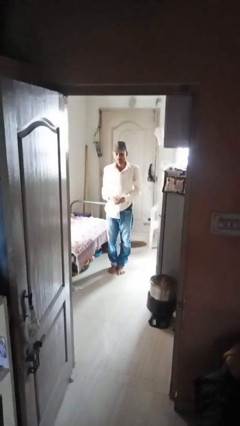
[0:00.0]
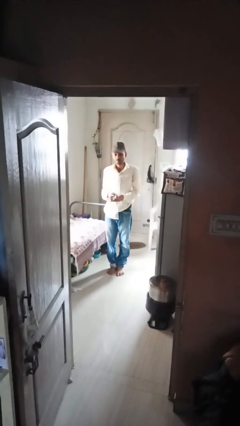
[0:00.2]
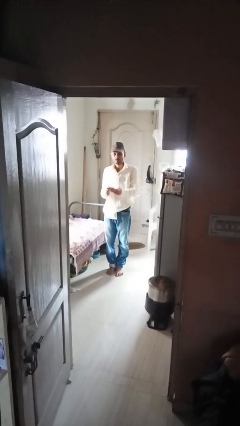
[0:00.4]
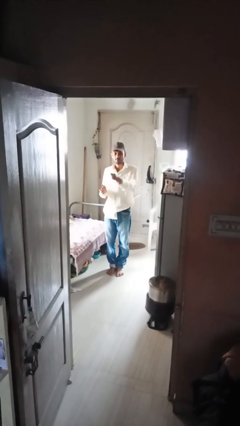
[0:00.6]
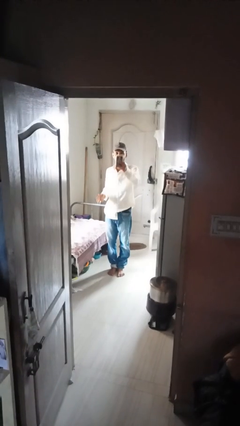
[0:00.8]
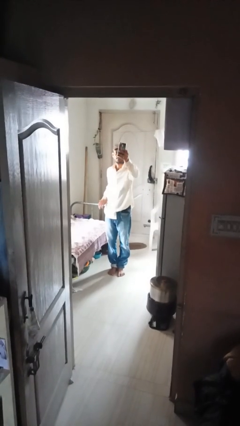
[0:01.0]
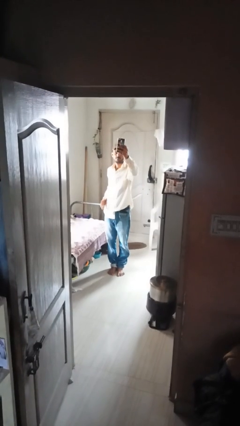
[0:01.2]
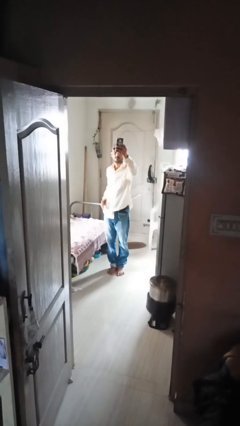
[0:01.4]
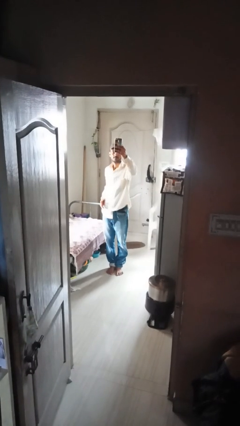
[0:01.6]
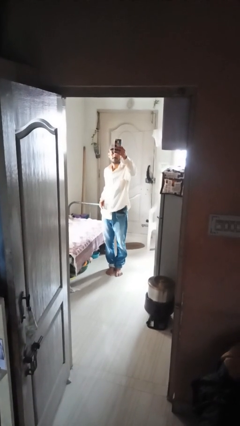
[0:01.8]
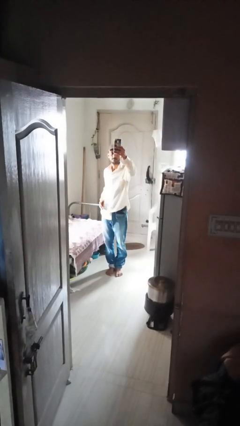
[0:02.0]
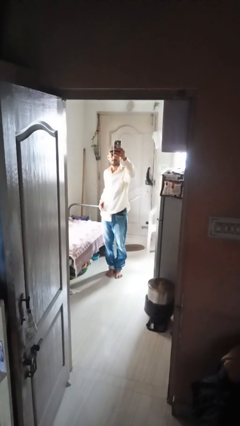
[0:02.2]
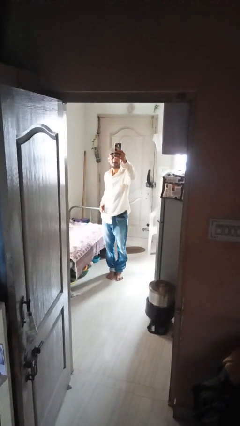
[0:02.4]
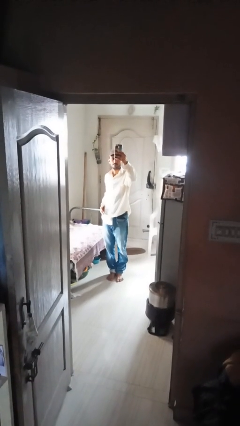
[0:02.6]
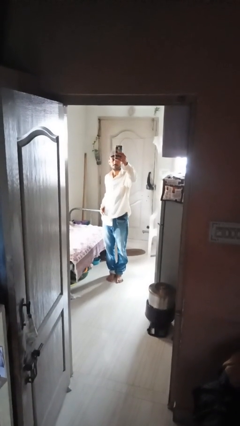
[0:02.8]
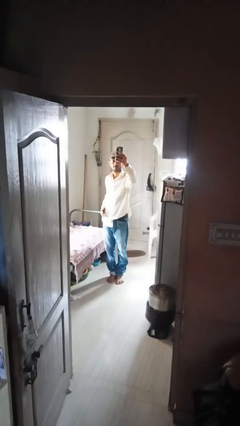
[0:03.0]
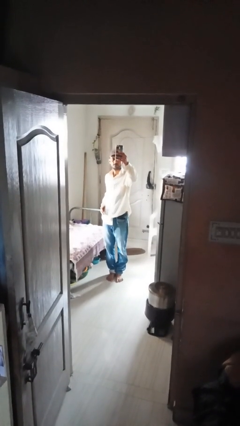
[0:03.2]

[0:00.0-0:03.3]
person takes selfie

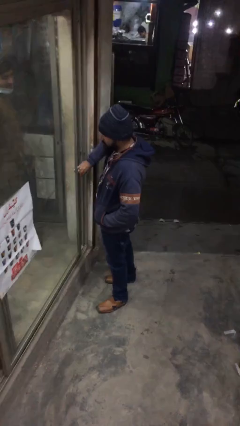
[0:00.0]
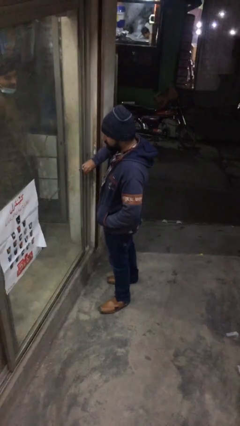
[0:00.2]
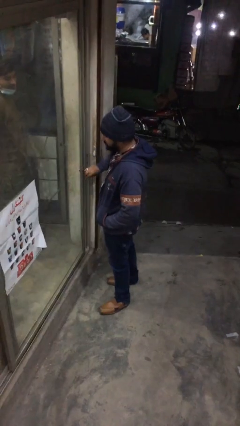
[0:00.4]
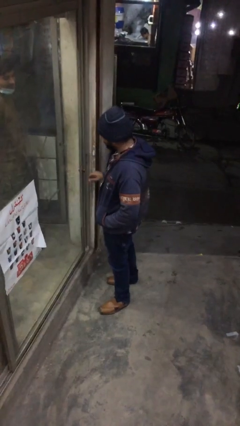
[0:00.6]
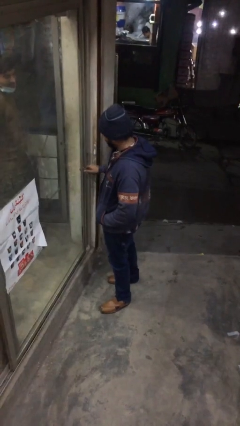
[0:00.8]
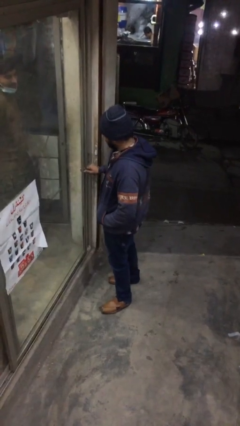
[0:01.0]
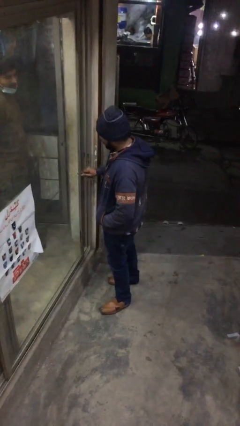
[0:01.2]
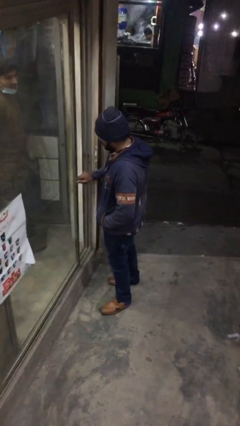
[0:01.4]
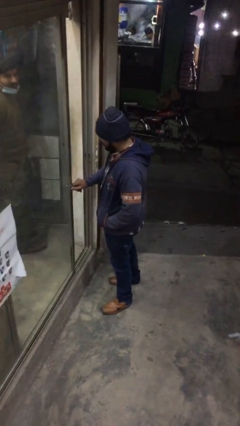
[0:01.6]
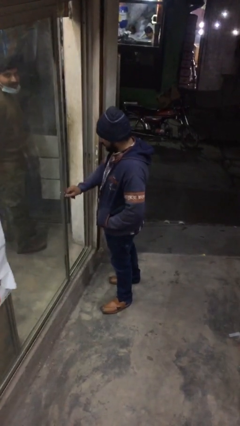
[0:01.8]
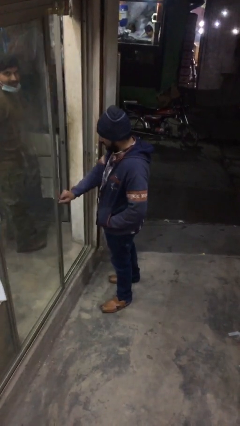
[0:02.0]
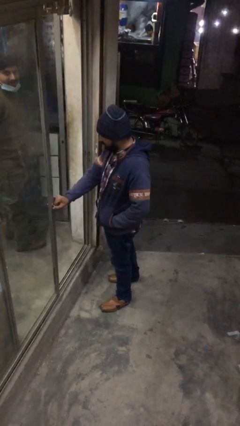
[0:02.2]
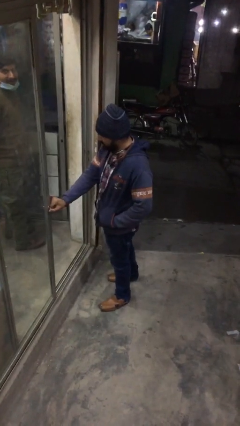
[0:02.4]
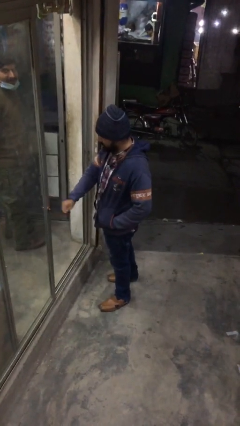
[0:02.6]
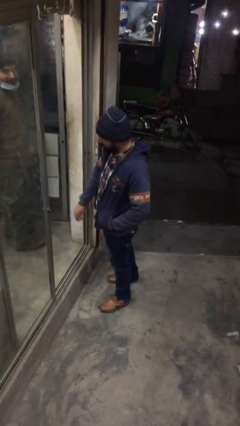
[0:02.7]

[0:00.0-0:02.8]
person opens facility door

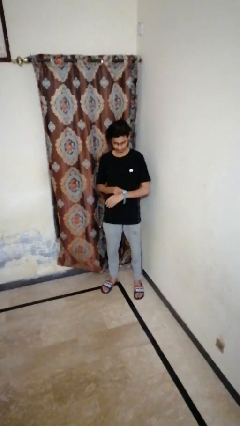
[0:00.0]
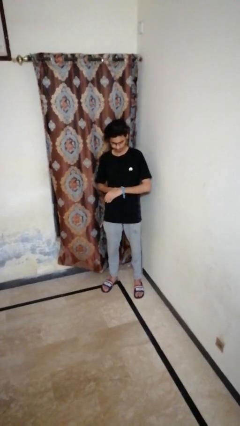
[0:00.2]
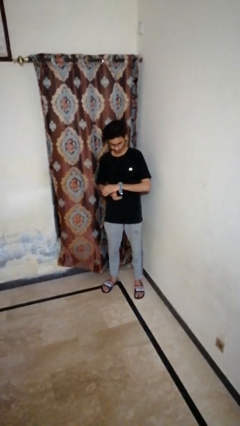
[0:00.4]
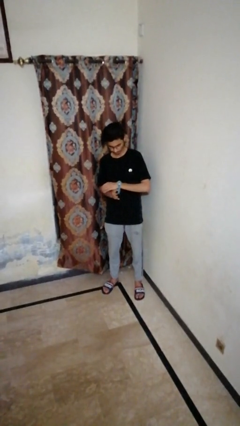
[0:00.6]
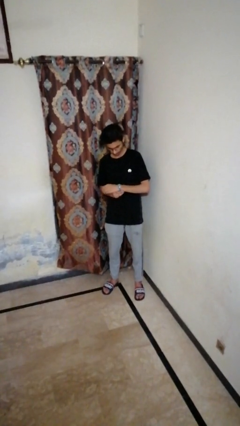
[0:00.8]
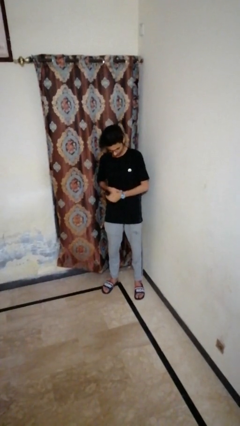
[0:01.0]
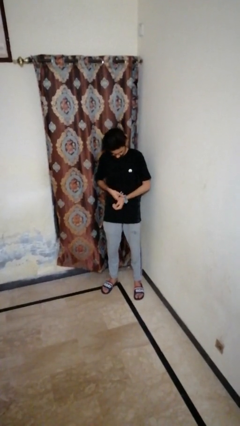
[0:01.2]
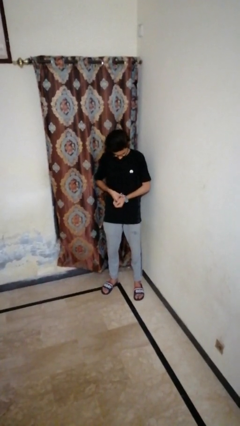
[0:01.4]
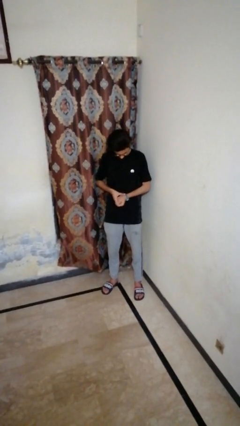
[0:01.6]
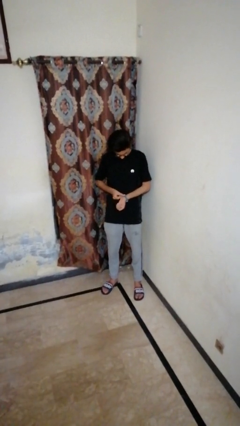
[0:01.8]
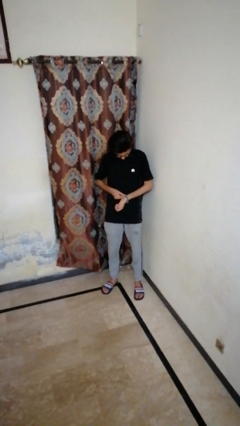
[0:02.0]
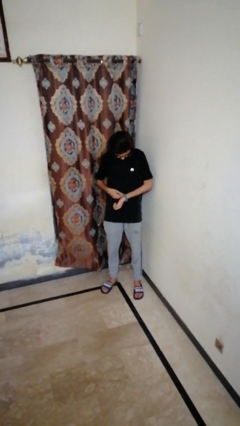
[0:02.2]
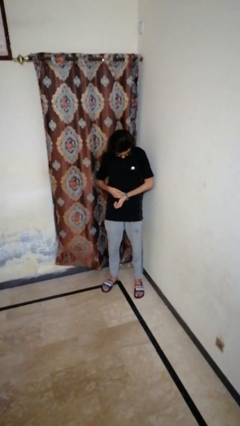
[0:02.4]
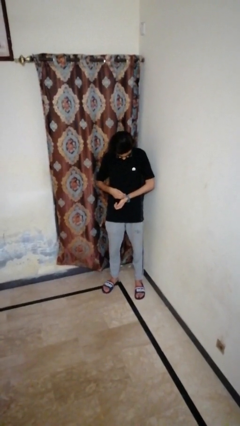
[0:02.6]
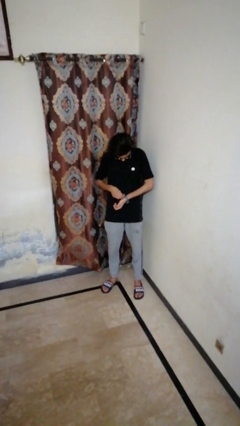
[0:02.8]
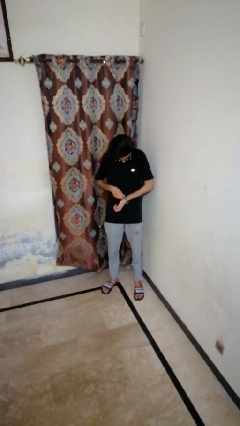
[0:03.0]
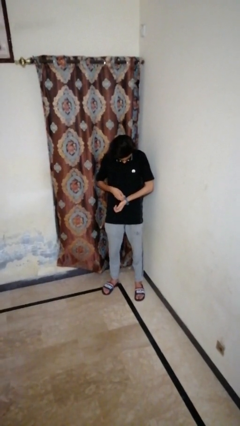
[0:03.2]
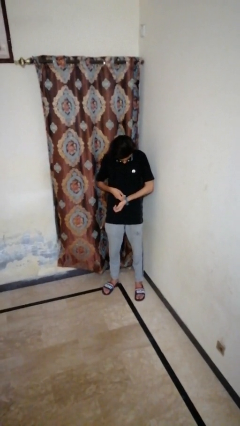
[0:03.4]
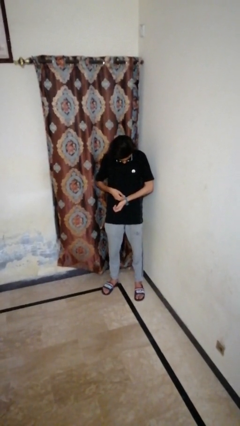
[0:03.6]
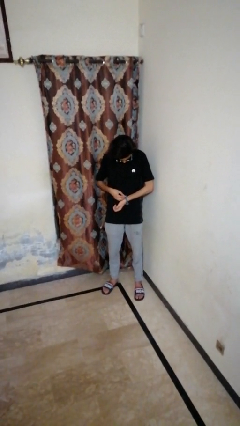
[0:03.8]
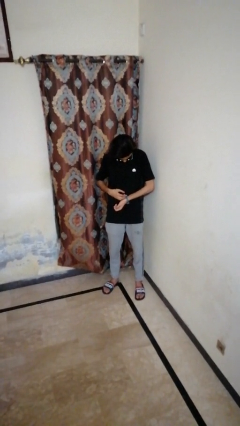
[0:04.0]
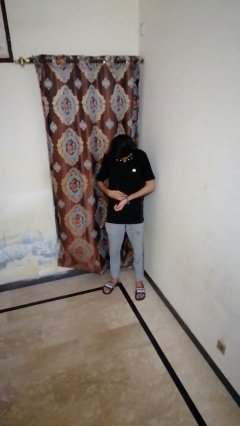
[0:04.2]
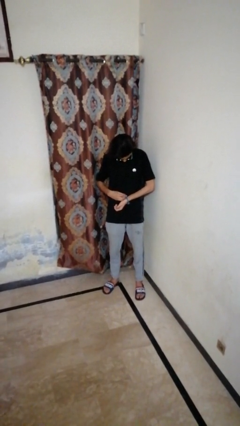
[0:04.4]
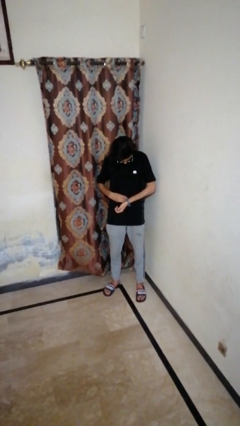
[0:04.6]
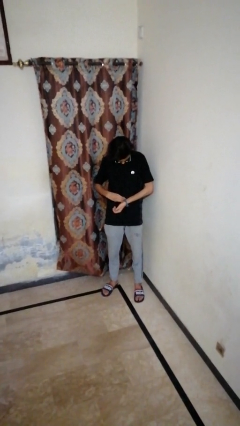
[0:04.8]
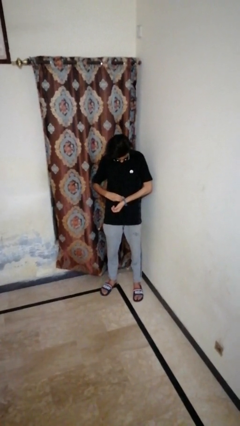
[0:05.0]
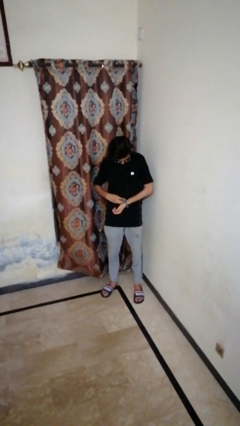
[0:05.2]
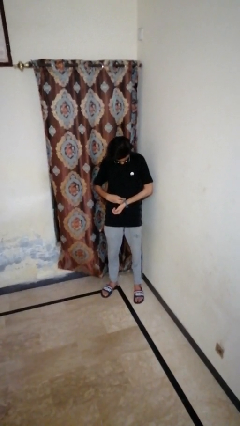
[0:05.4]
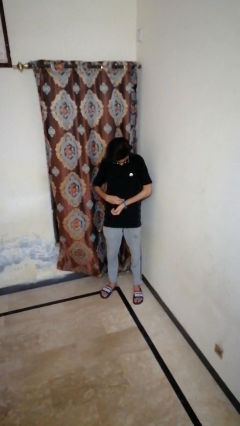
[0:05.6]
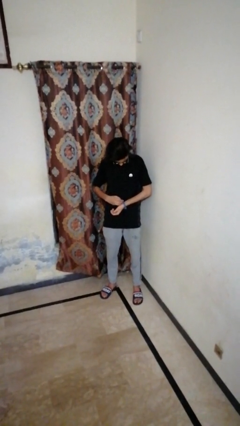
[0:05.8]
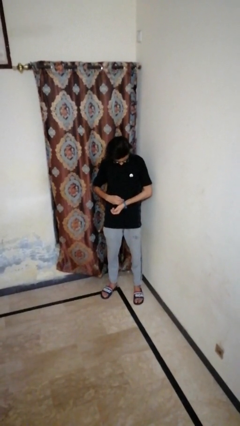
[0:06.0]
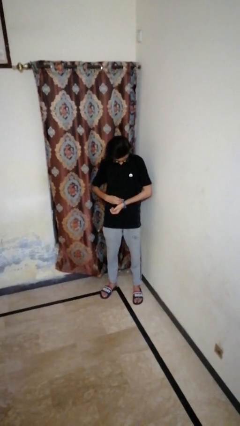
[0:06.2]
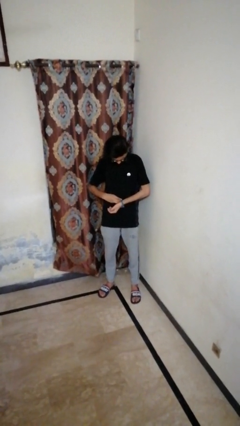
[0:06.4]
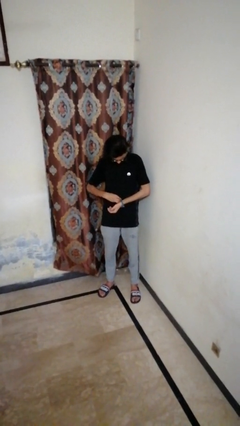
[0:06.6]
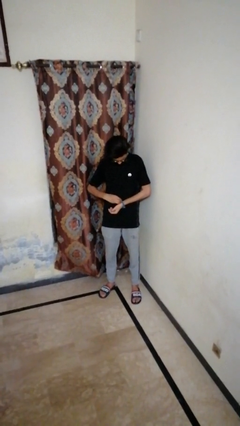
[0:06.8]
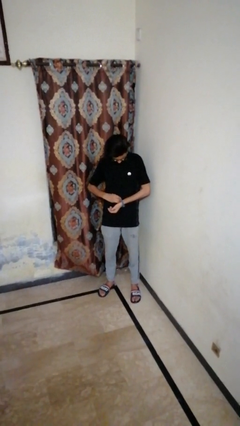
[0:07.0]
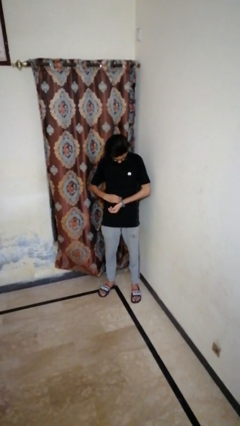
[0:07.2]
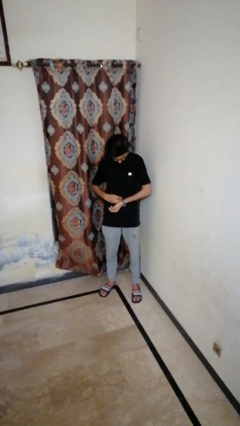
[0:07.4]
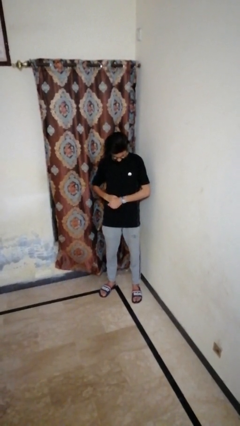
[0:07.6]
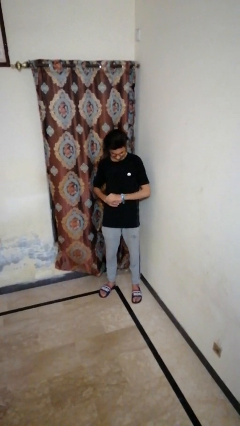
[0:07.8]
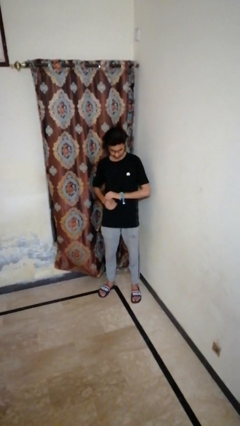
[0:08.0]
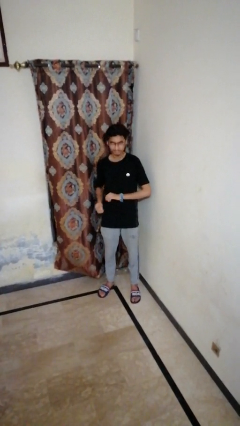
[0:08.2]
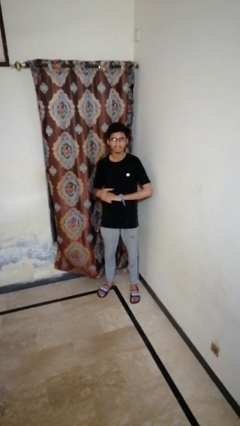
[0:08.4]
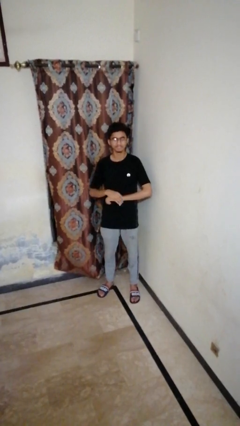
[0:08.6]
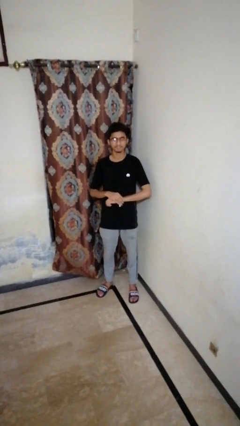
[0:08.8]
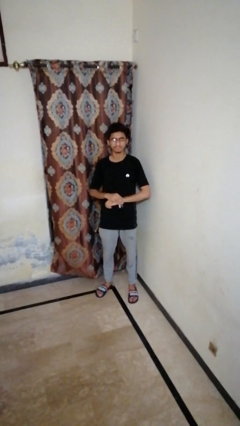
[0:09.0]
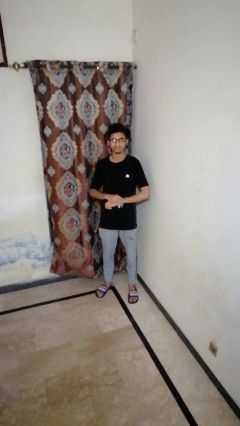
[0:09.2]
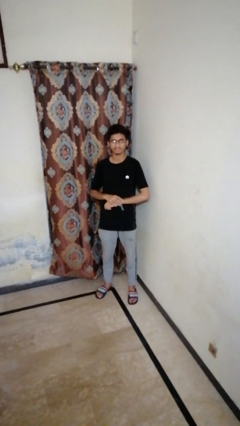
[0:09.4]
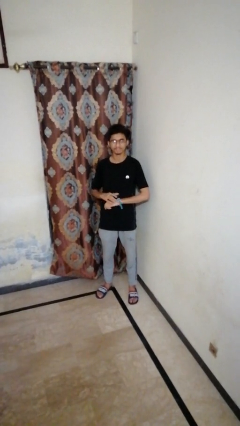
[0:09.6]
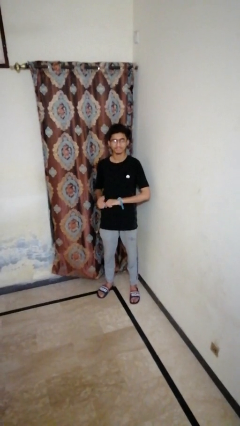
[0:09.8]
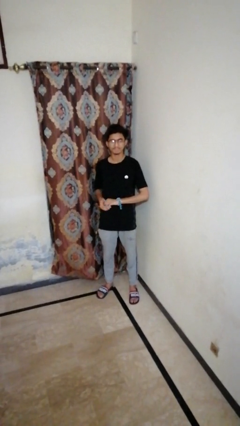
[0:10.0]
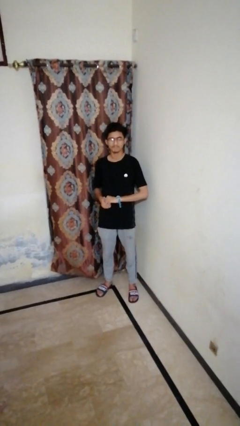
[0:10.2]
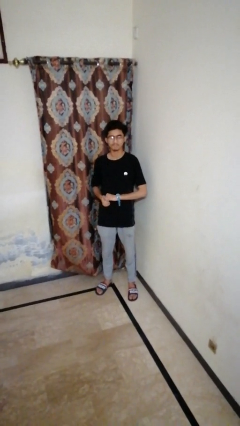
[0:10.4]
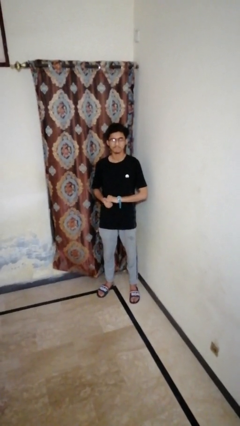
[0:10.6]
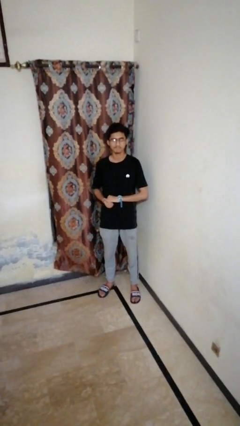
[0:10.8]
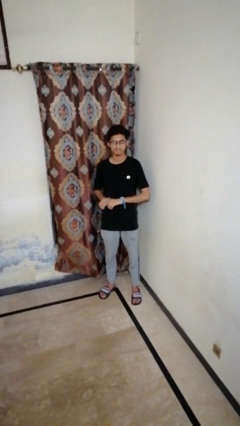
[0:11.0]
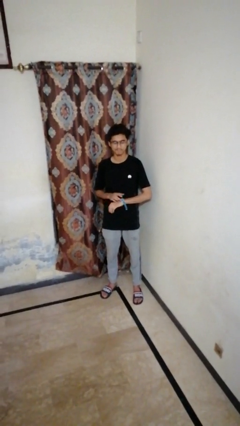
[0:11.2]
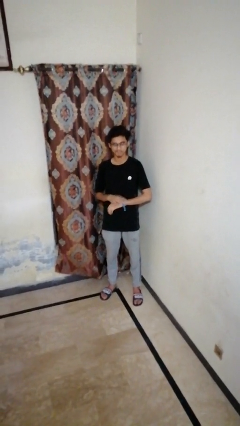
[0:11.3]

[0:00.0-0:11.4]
person puts on wristwatch

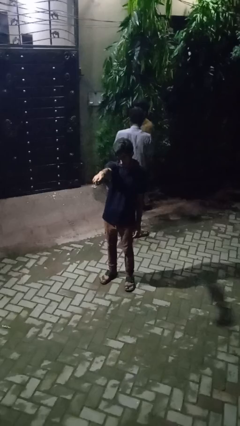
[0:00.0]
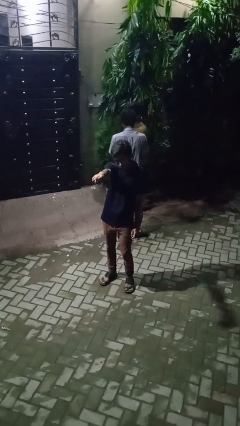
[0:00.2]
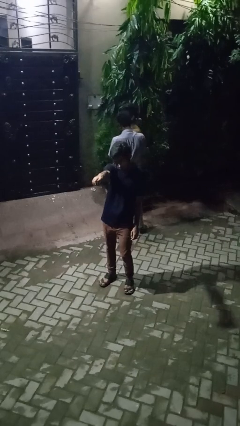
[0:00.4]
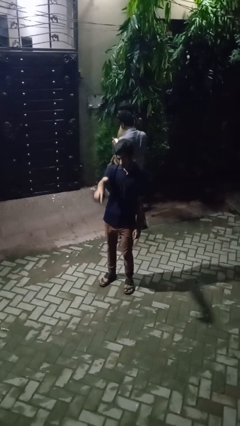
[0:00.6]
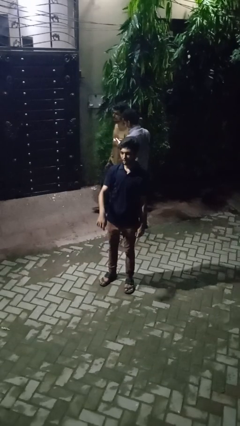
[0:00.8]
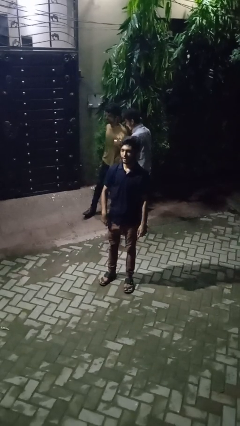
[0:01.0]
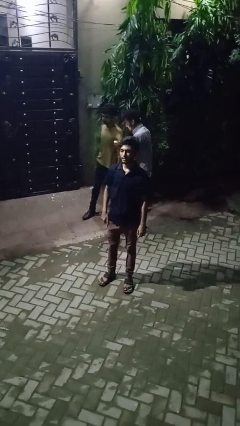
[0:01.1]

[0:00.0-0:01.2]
person points at person
